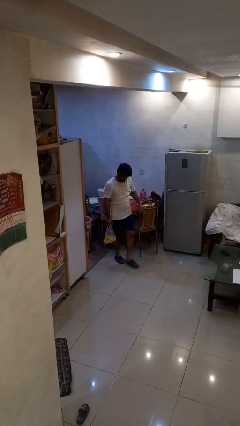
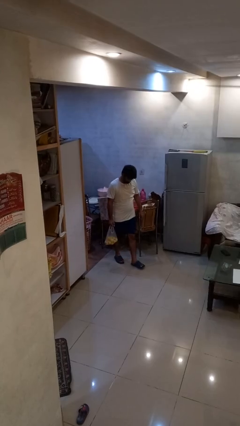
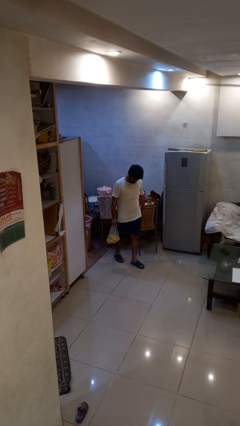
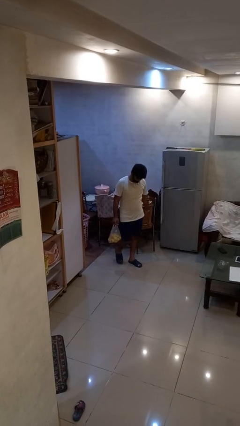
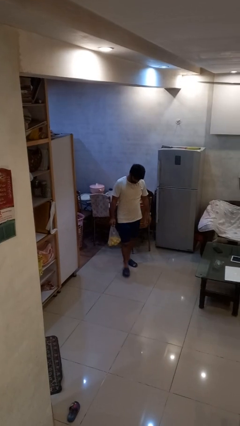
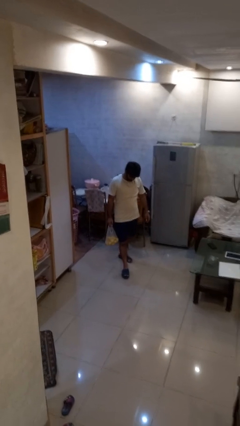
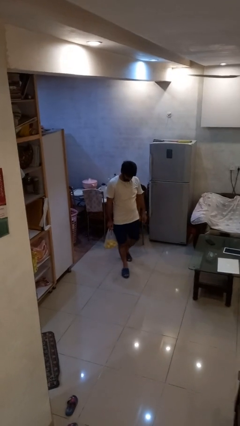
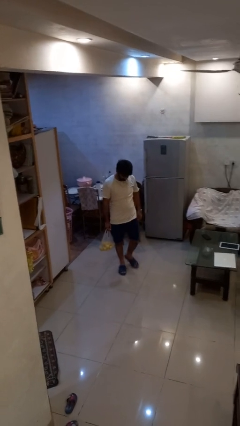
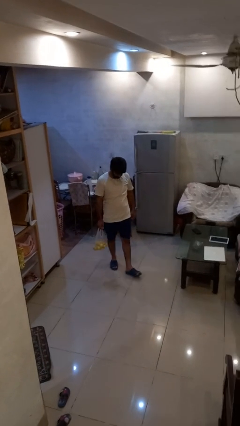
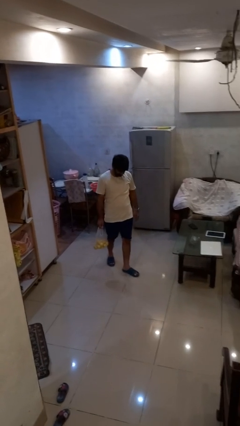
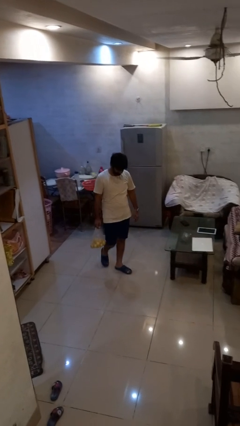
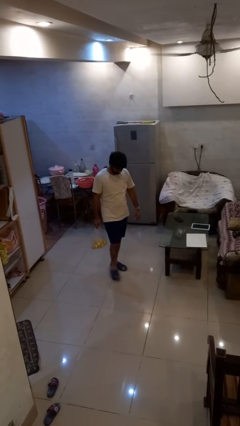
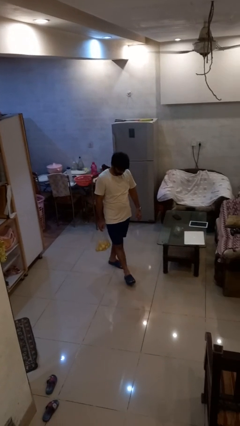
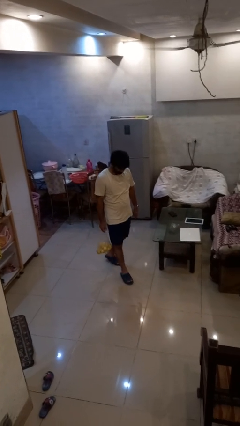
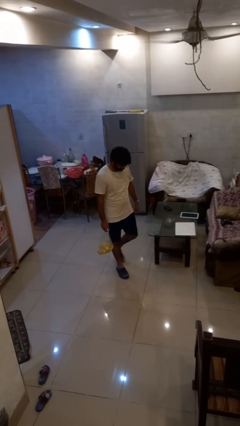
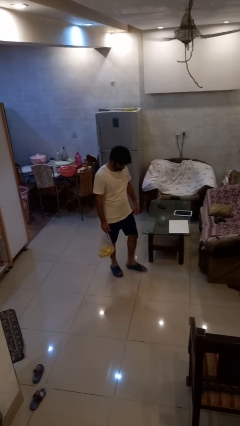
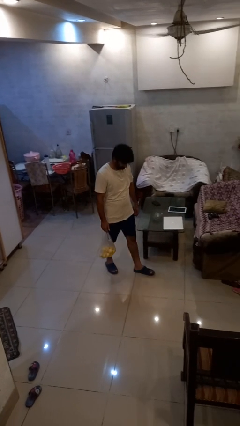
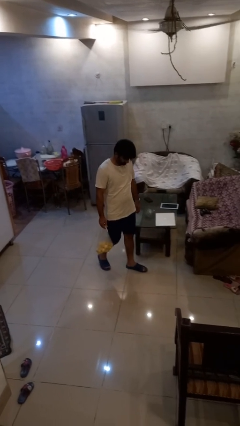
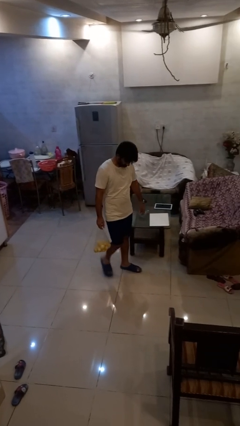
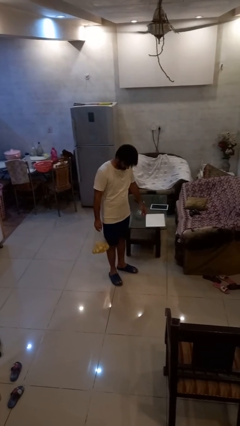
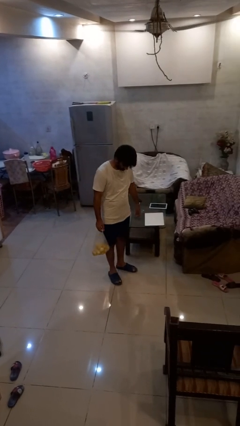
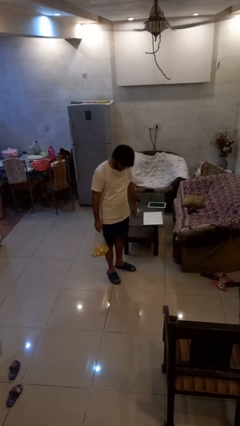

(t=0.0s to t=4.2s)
person carries groceries

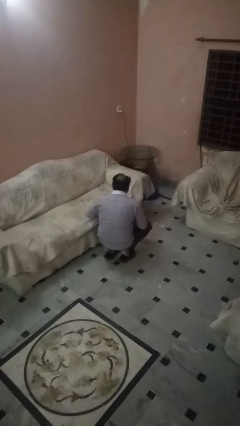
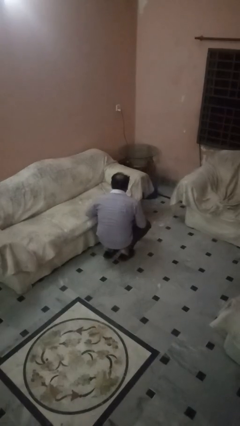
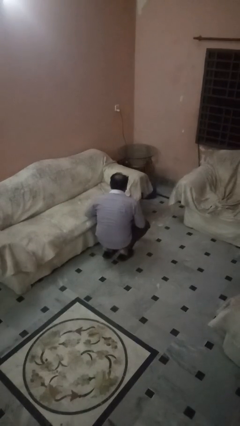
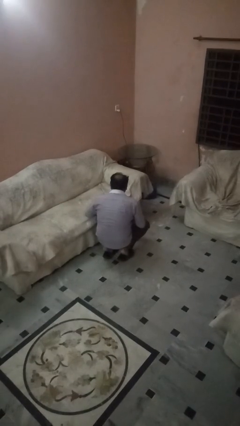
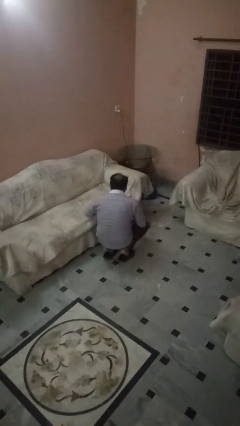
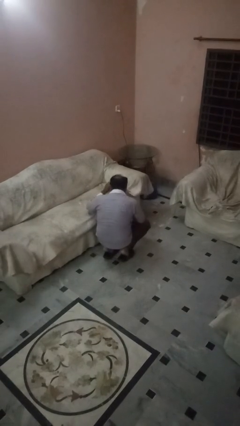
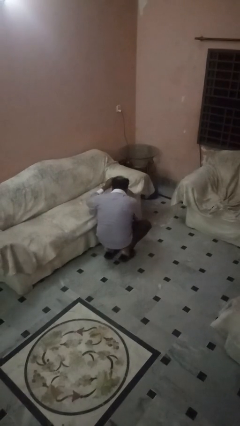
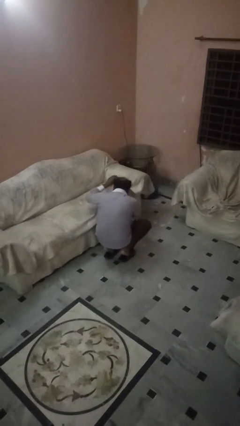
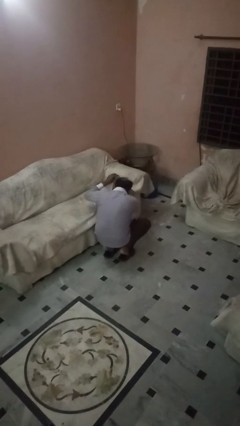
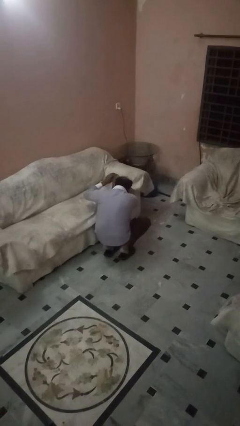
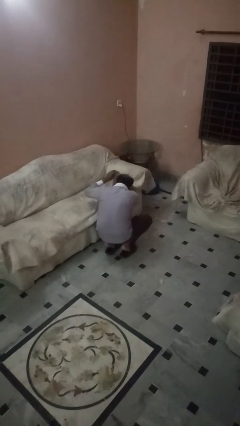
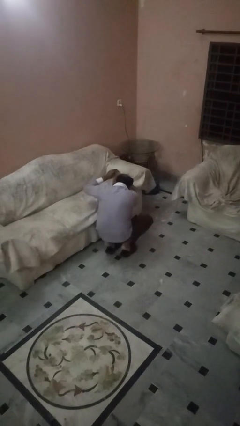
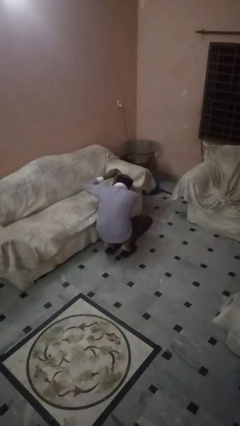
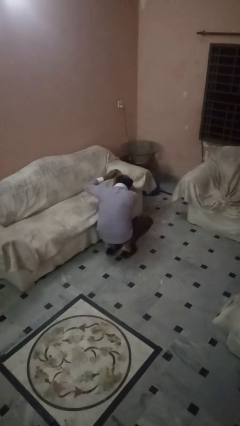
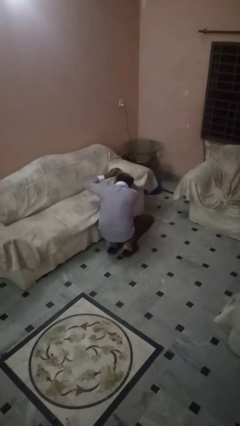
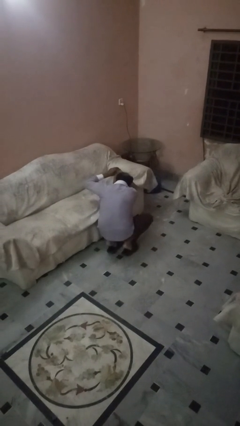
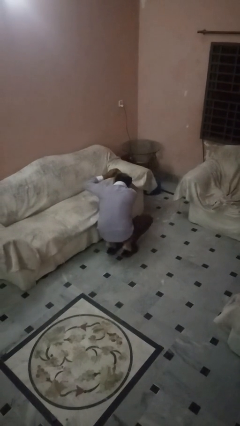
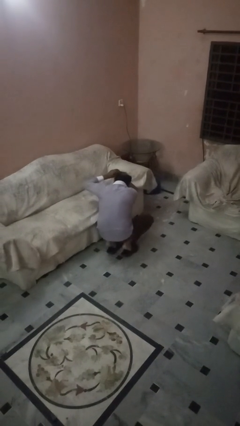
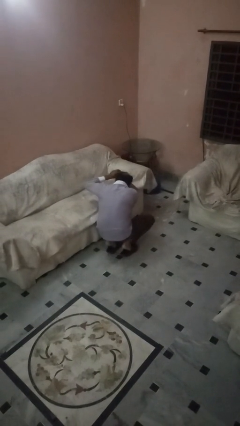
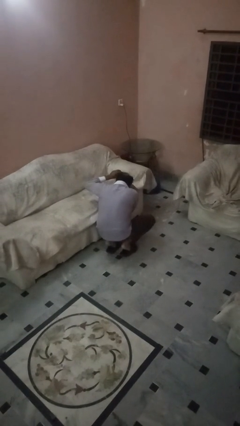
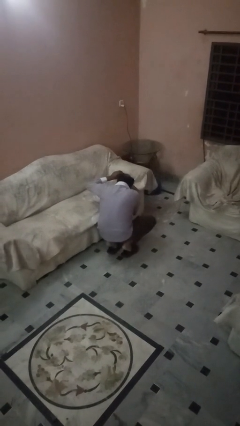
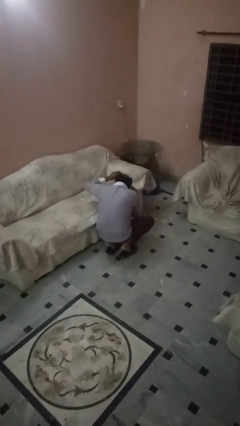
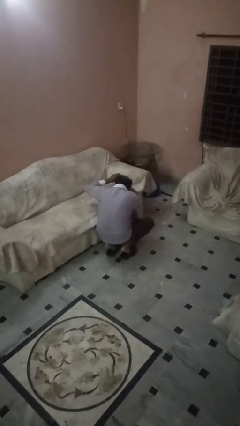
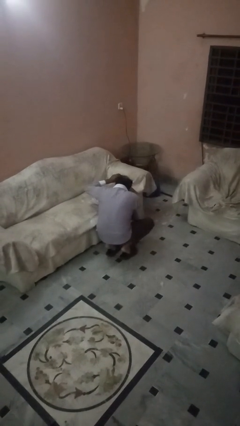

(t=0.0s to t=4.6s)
person searches in couch

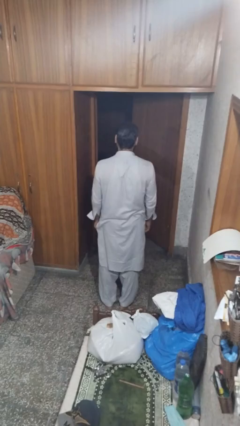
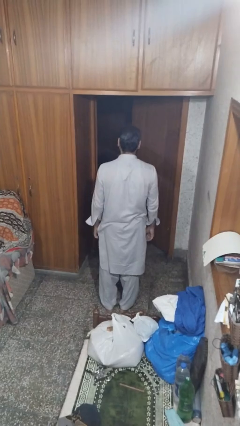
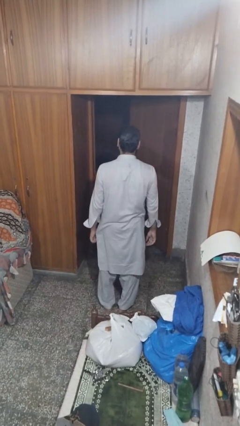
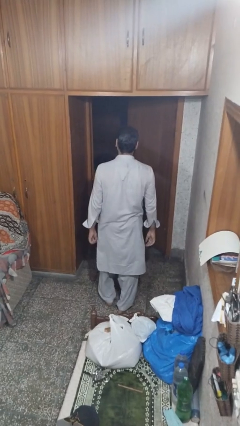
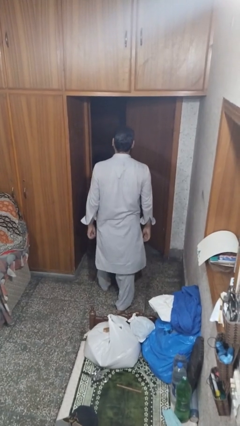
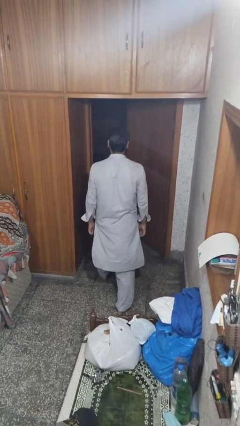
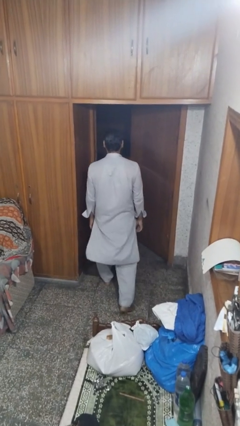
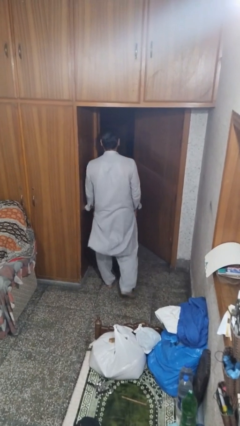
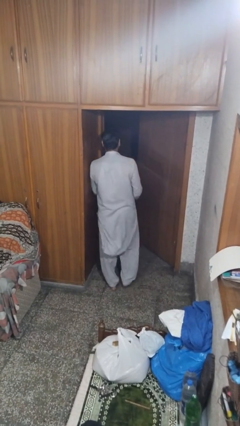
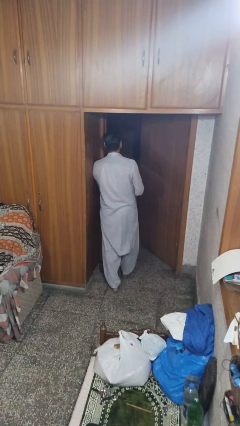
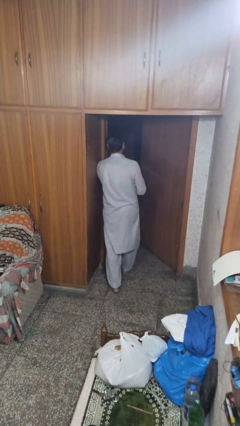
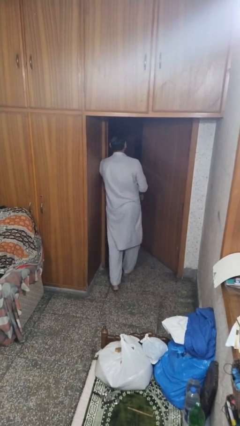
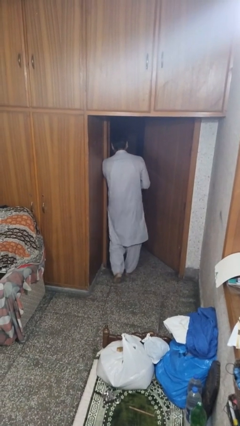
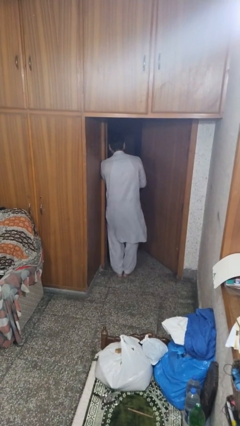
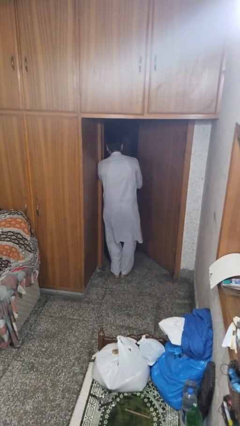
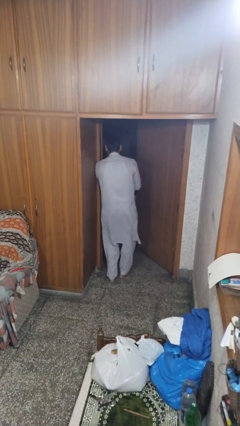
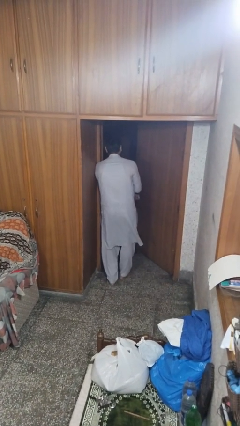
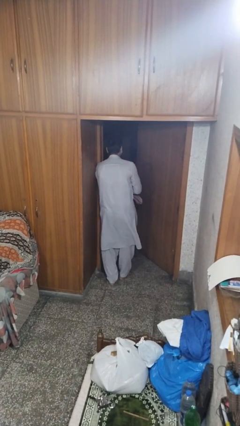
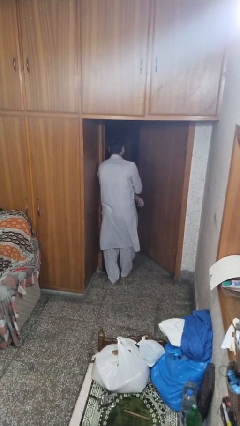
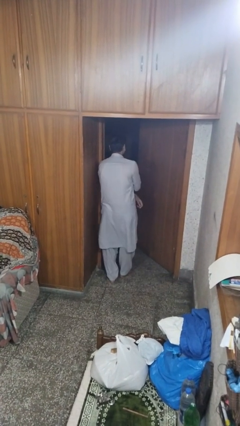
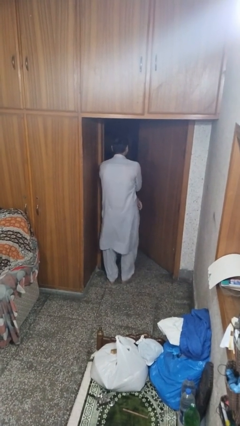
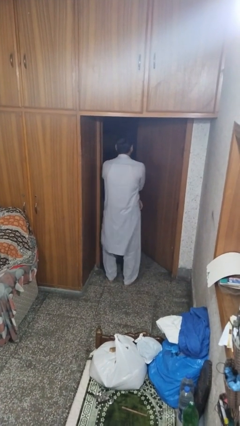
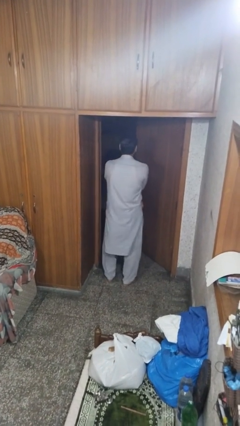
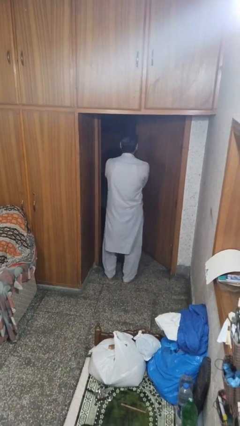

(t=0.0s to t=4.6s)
person bumps into wall

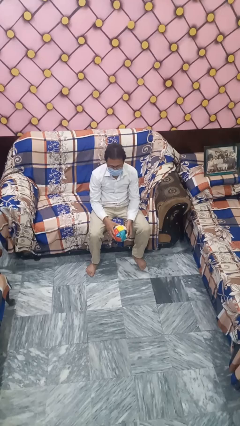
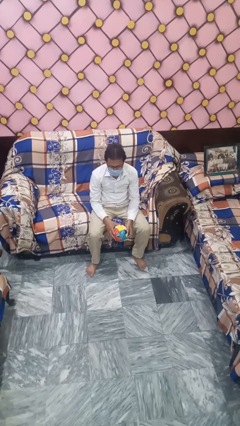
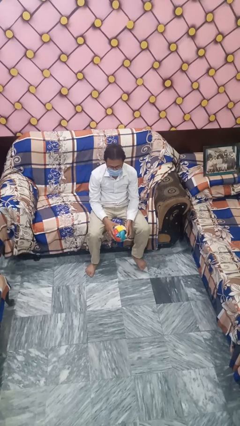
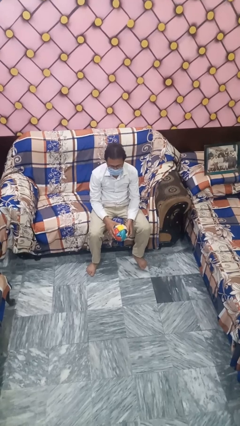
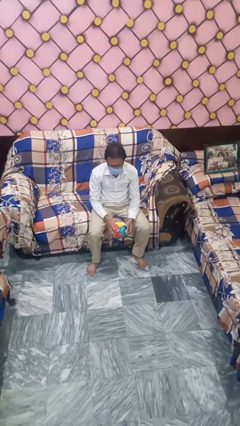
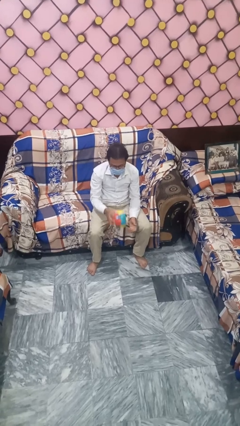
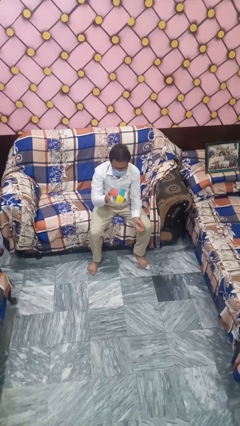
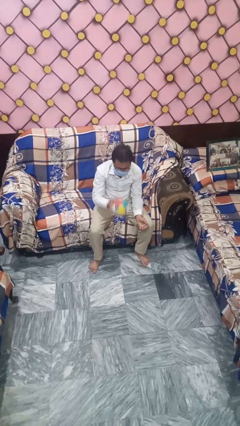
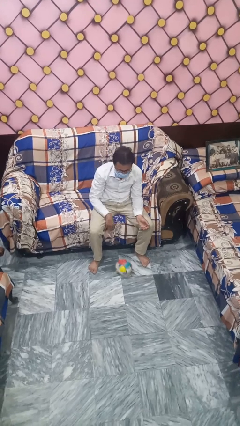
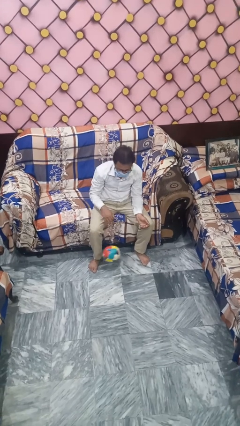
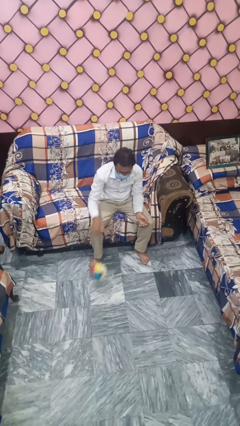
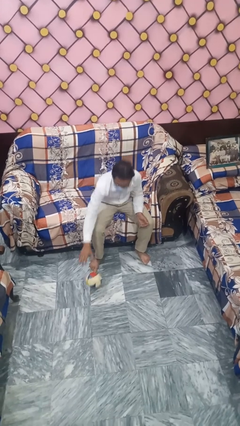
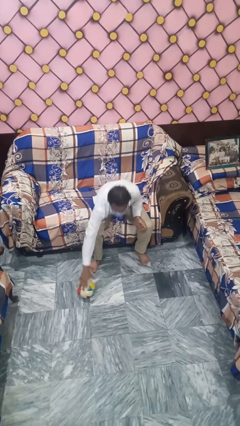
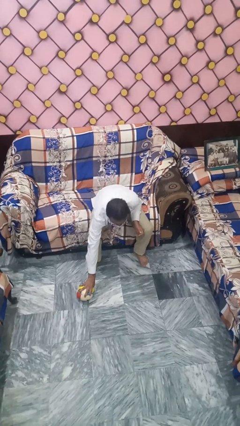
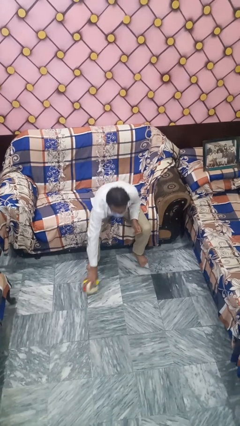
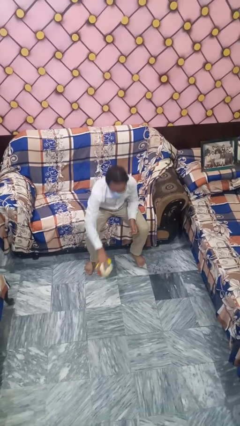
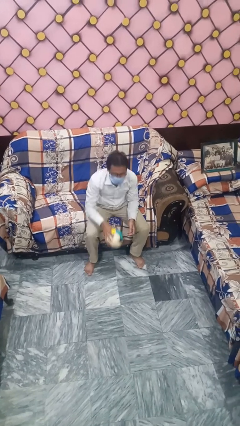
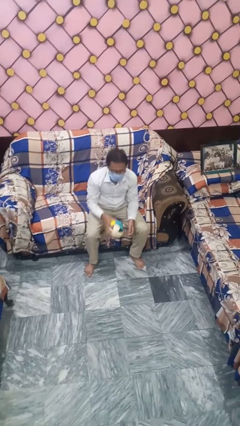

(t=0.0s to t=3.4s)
person bounces ball on floor

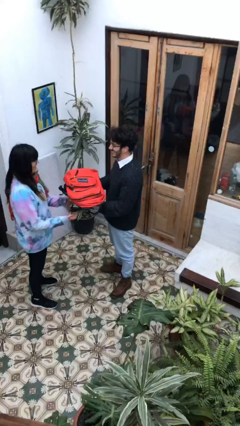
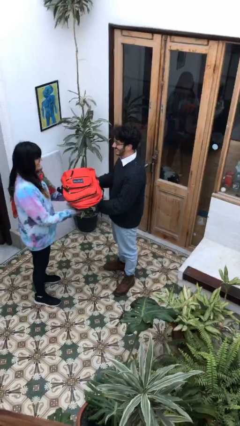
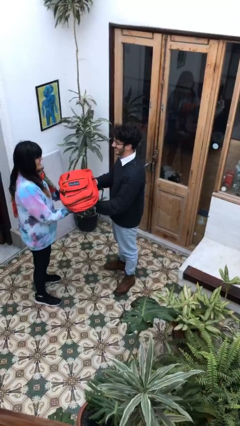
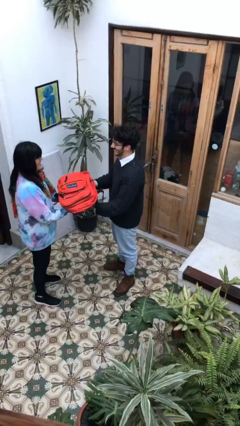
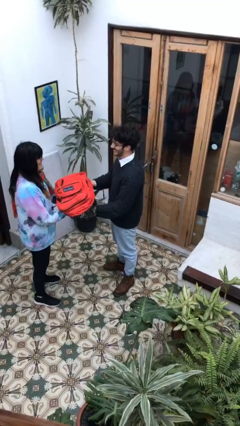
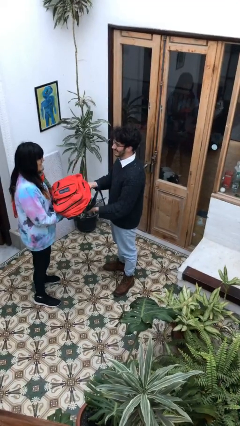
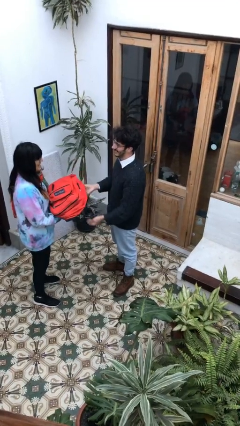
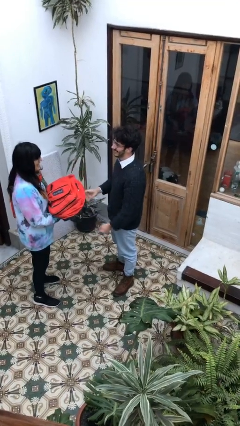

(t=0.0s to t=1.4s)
person transfers object to person
